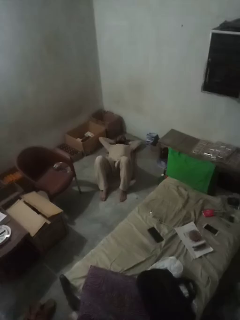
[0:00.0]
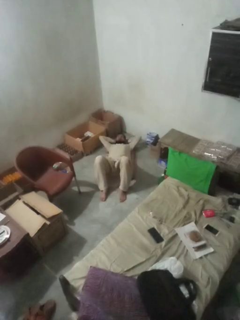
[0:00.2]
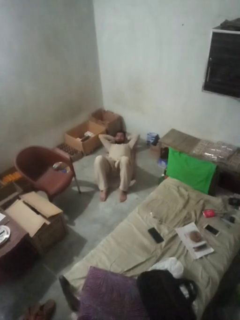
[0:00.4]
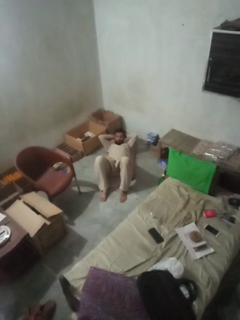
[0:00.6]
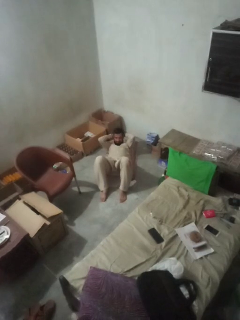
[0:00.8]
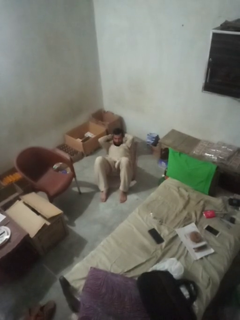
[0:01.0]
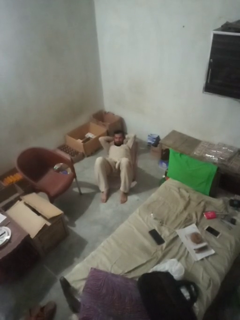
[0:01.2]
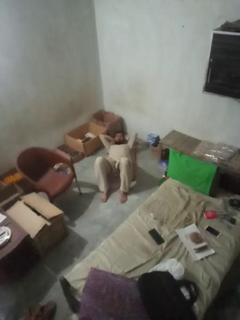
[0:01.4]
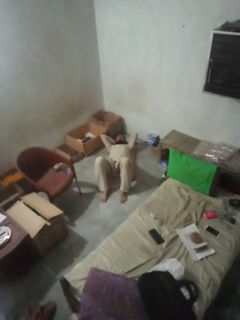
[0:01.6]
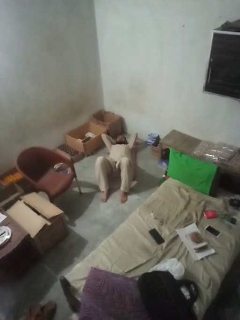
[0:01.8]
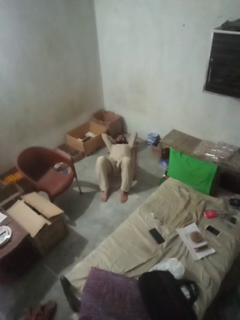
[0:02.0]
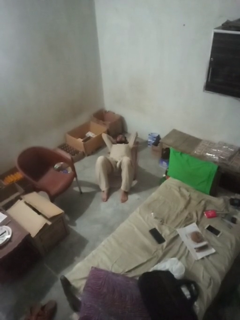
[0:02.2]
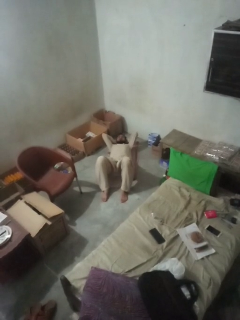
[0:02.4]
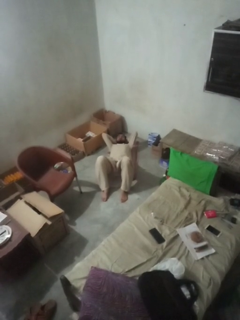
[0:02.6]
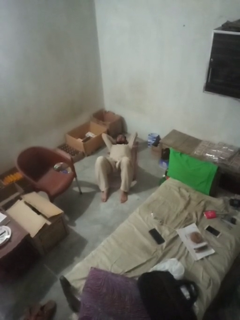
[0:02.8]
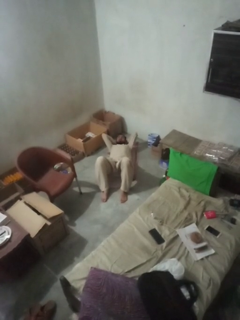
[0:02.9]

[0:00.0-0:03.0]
person exercises with situp

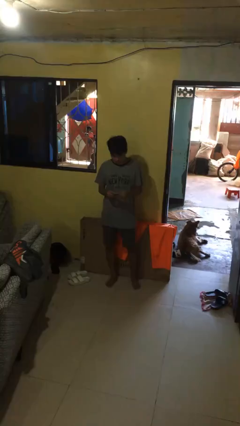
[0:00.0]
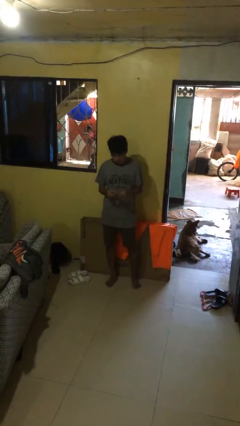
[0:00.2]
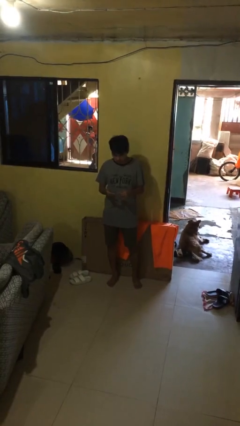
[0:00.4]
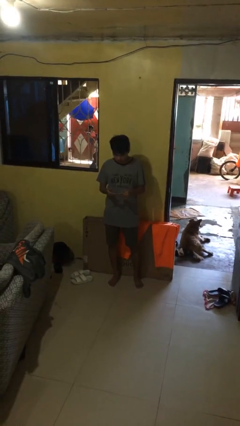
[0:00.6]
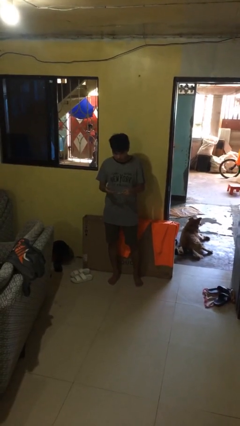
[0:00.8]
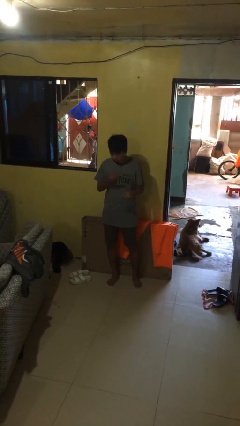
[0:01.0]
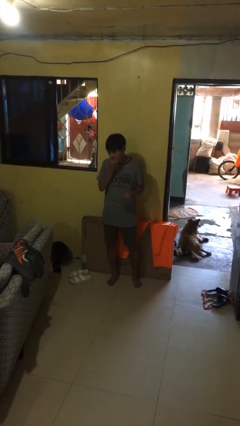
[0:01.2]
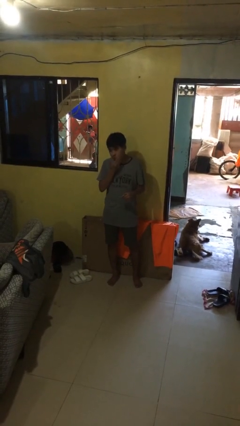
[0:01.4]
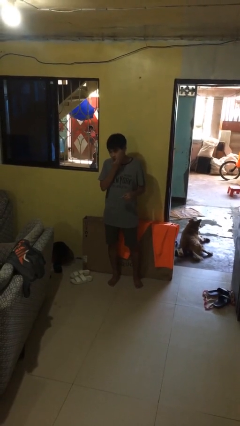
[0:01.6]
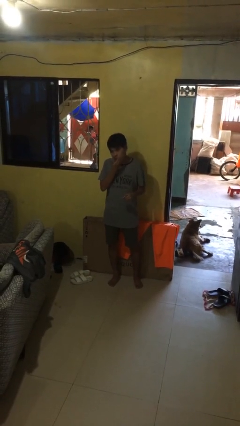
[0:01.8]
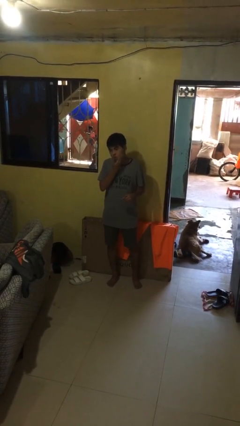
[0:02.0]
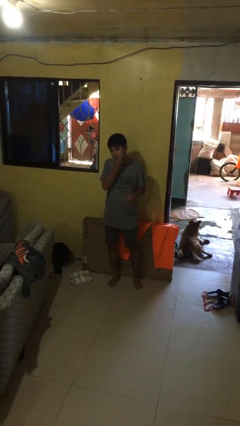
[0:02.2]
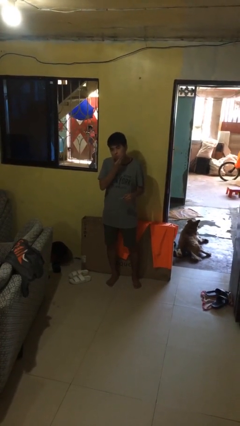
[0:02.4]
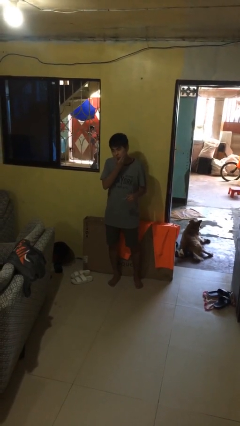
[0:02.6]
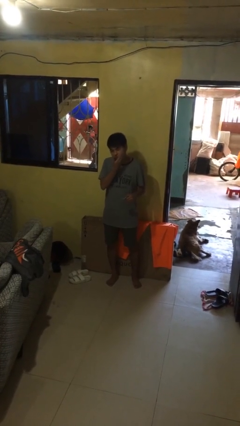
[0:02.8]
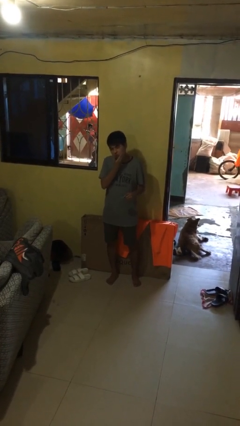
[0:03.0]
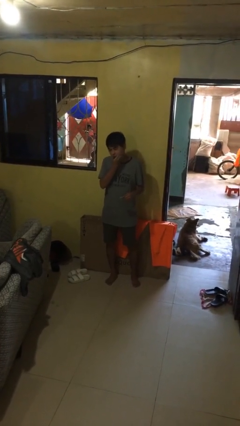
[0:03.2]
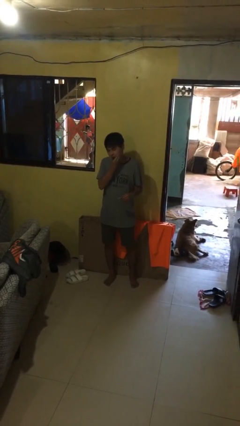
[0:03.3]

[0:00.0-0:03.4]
person applies facial moisturizer

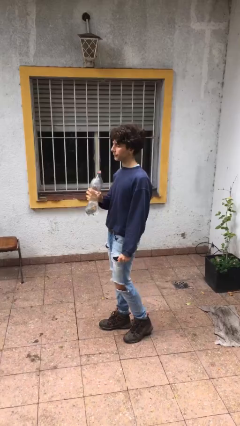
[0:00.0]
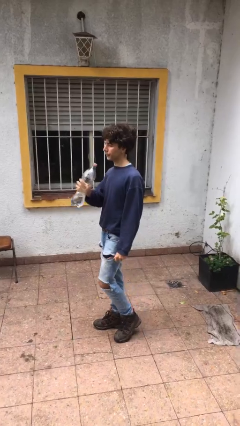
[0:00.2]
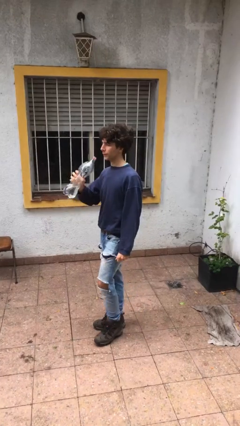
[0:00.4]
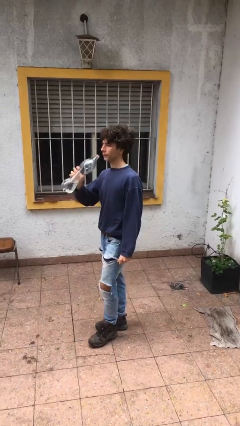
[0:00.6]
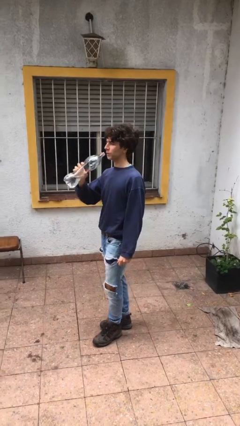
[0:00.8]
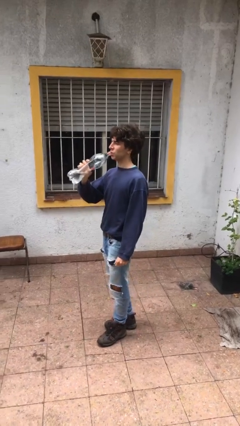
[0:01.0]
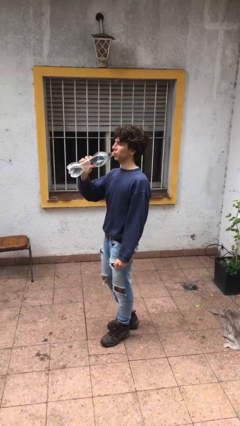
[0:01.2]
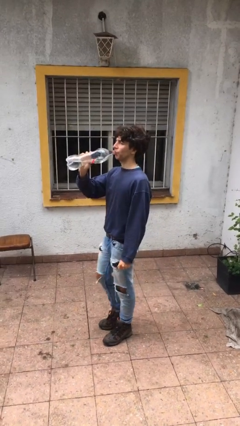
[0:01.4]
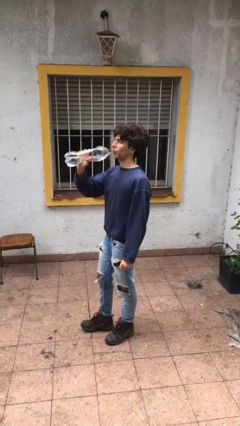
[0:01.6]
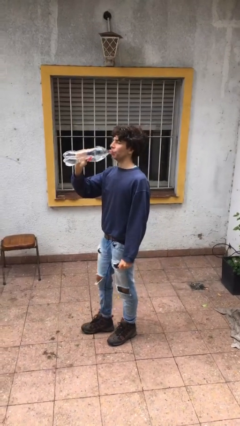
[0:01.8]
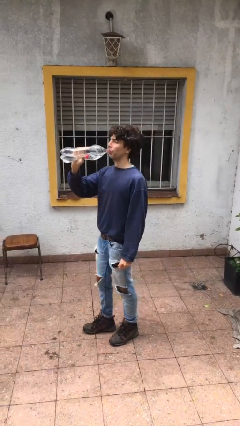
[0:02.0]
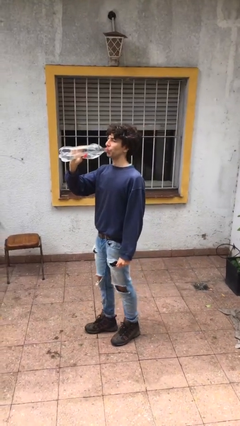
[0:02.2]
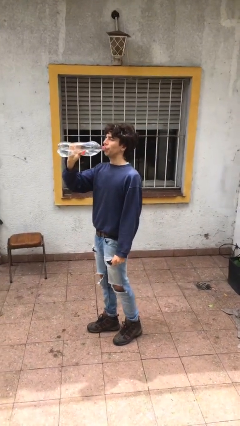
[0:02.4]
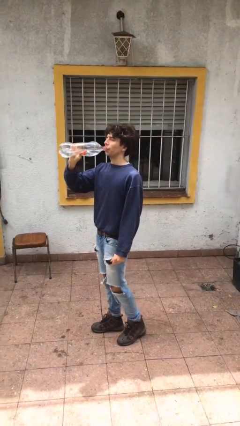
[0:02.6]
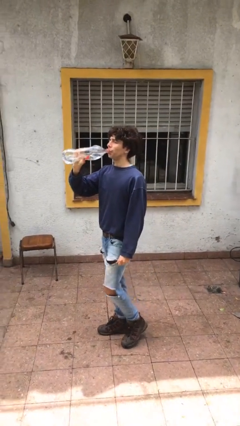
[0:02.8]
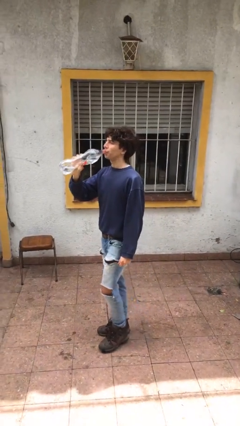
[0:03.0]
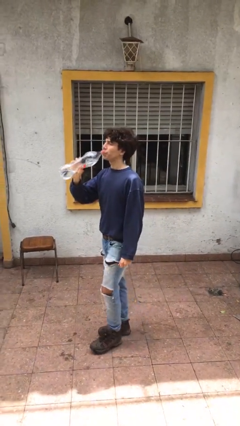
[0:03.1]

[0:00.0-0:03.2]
person drinks from bottle

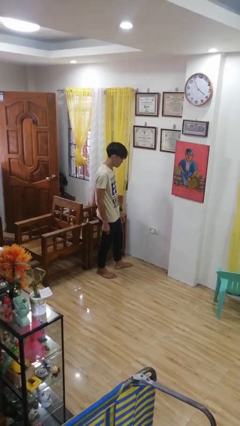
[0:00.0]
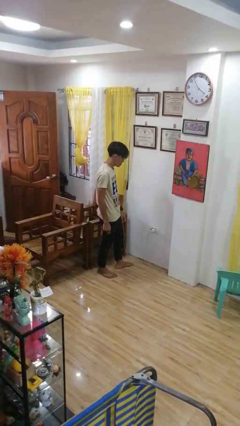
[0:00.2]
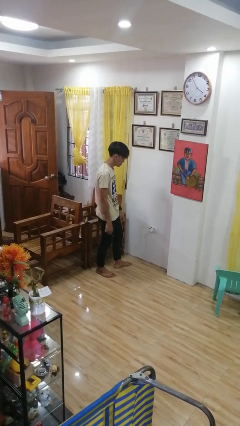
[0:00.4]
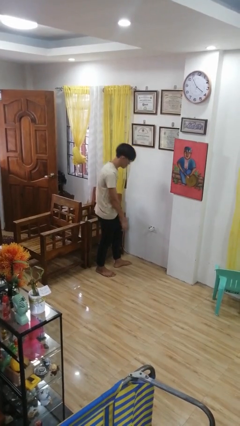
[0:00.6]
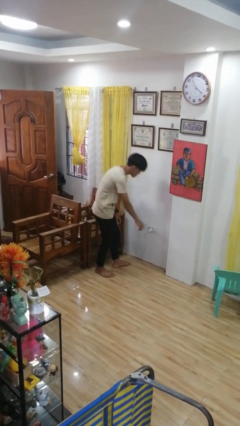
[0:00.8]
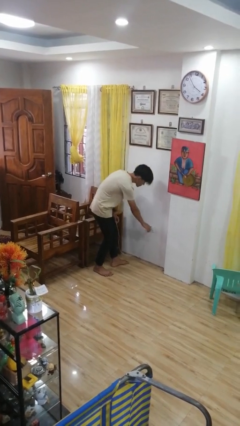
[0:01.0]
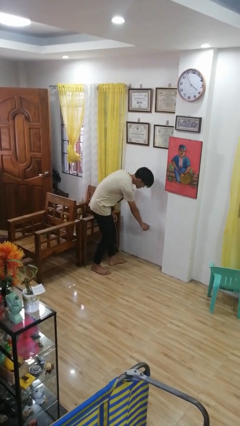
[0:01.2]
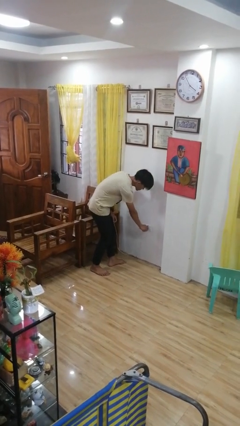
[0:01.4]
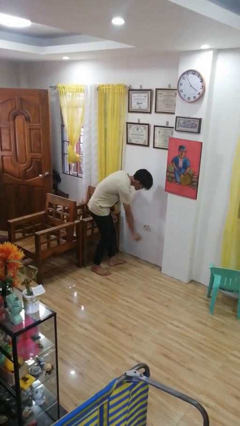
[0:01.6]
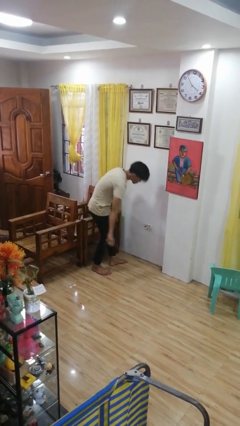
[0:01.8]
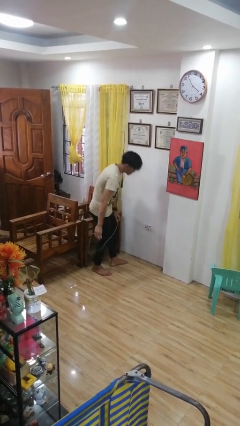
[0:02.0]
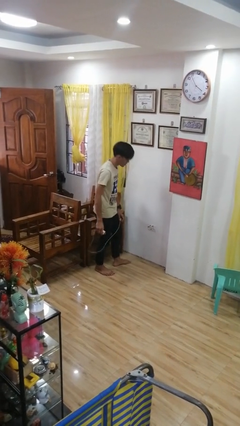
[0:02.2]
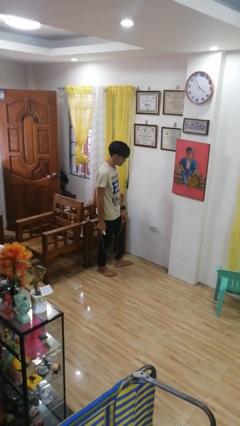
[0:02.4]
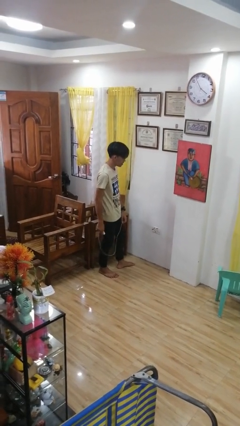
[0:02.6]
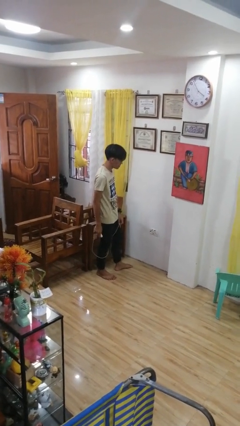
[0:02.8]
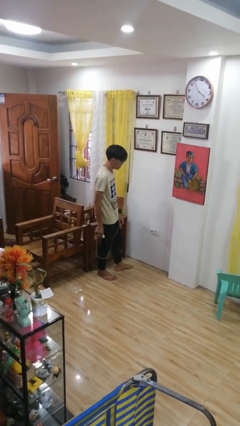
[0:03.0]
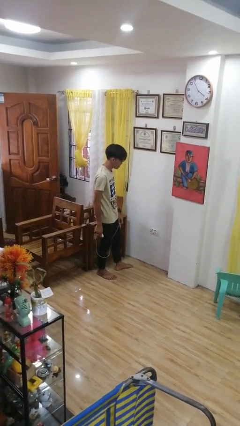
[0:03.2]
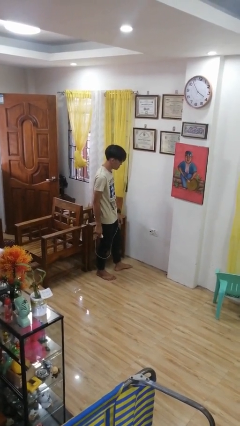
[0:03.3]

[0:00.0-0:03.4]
person unplugs from electrical socket

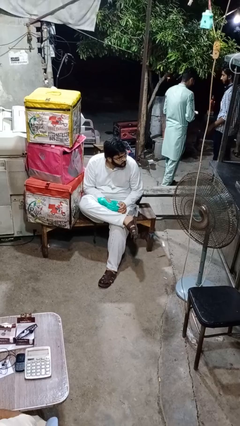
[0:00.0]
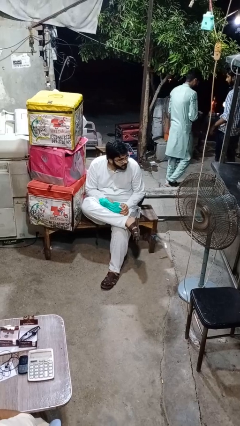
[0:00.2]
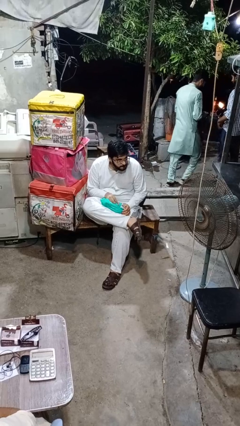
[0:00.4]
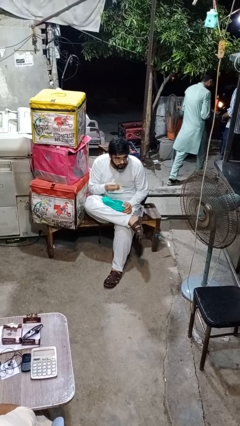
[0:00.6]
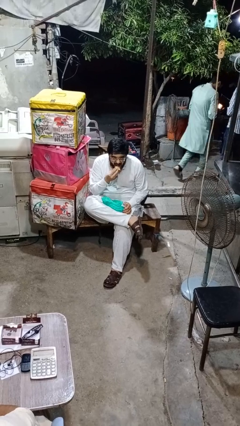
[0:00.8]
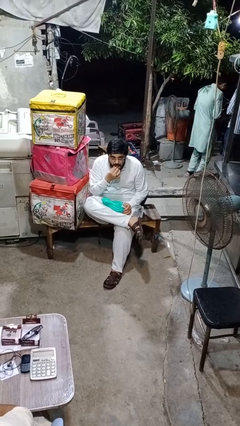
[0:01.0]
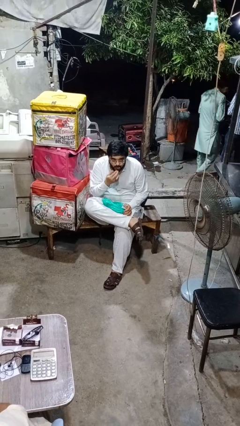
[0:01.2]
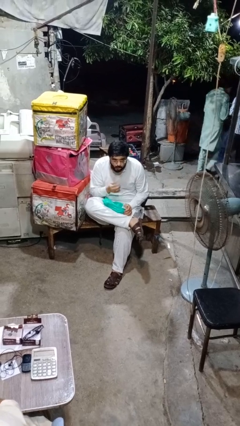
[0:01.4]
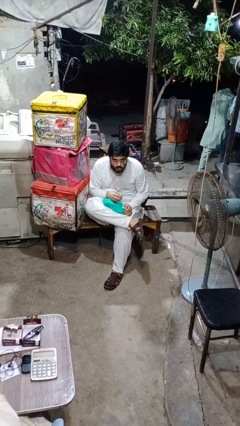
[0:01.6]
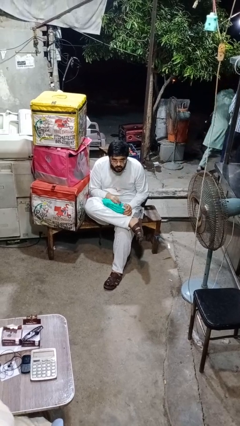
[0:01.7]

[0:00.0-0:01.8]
person eats snack from bag

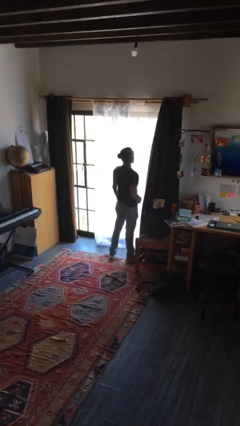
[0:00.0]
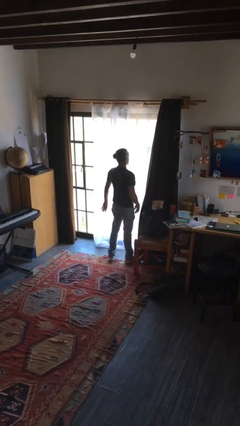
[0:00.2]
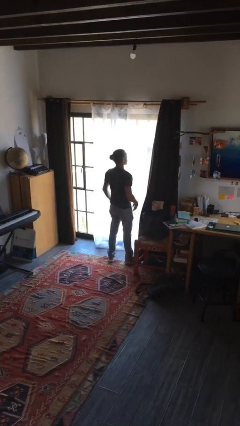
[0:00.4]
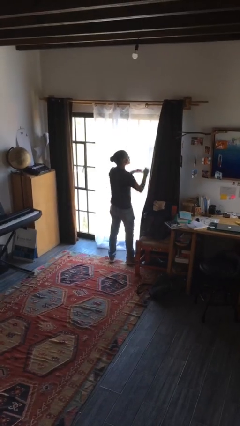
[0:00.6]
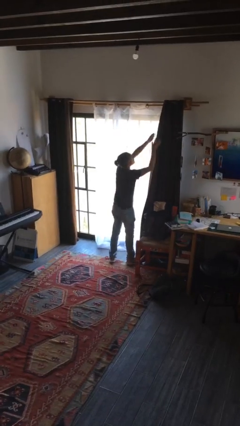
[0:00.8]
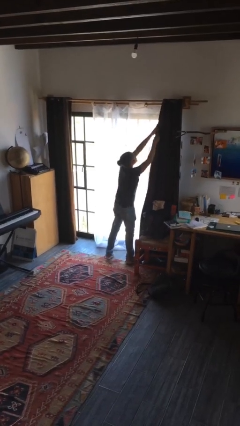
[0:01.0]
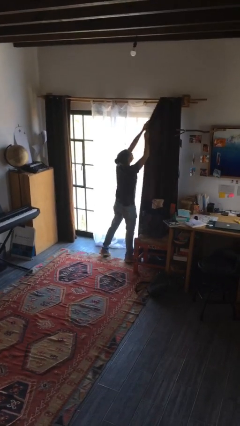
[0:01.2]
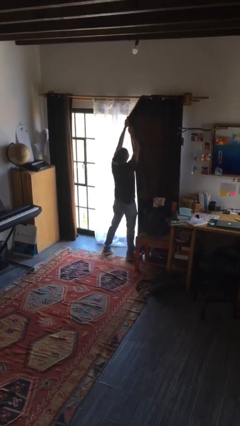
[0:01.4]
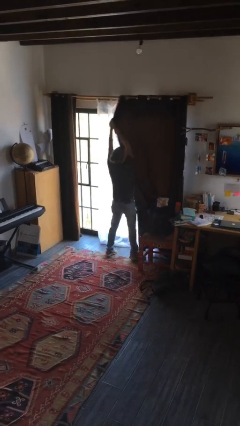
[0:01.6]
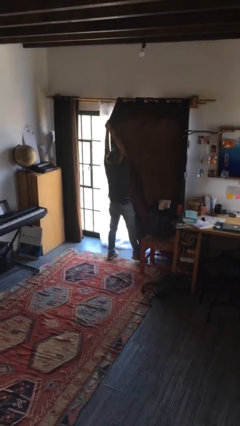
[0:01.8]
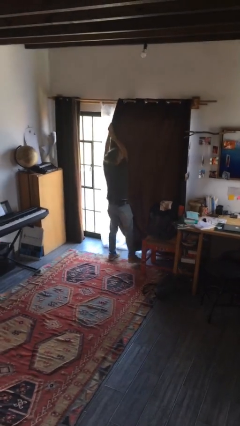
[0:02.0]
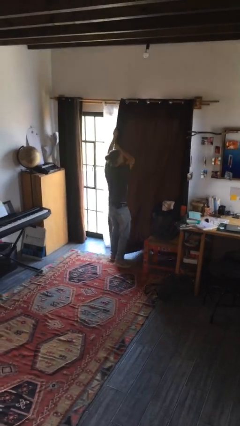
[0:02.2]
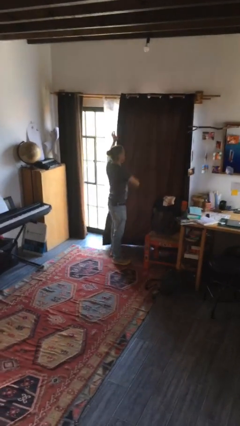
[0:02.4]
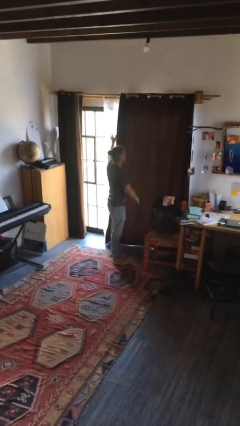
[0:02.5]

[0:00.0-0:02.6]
person closes curtains

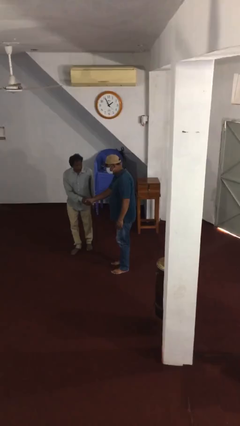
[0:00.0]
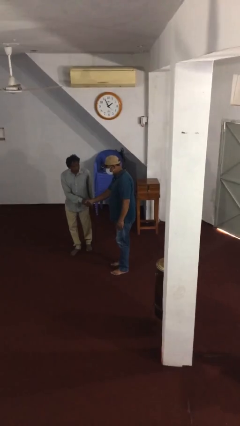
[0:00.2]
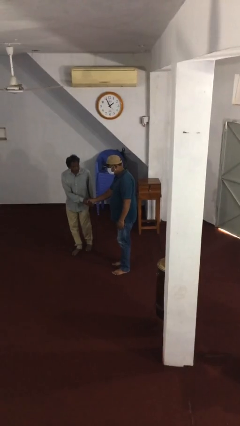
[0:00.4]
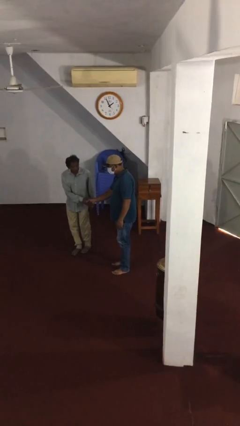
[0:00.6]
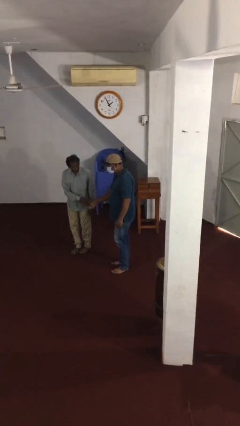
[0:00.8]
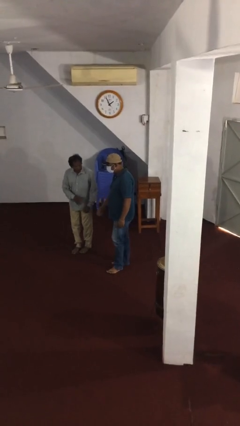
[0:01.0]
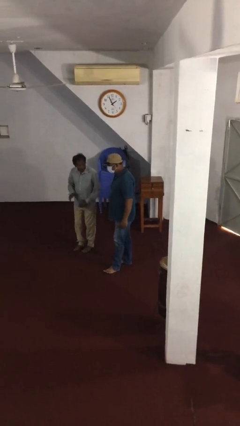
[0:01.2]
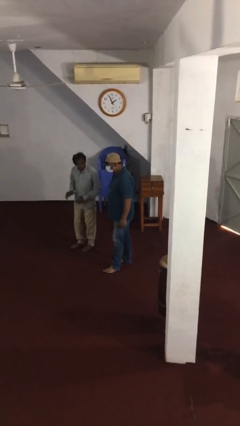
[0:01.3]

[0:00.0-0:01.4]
person shakes hand
